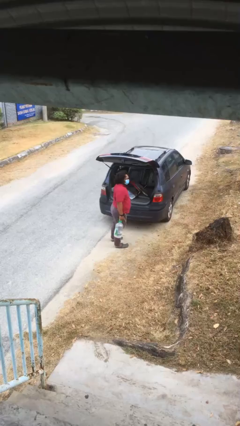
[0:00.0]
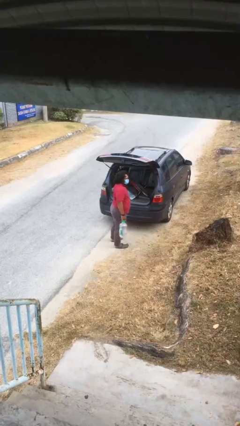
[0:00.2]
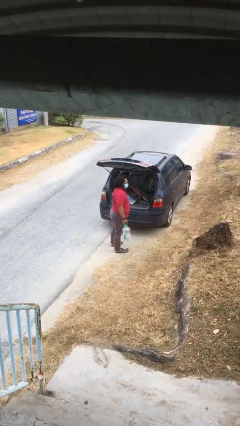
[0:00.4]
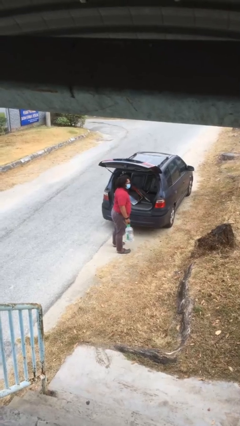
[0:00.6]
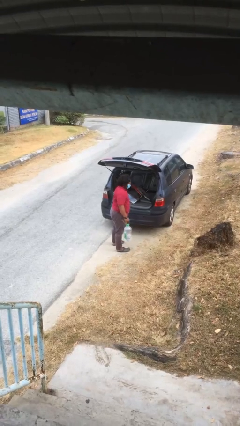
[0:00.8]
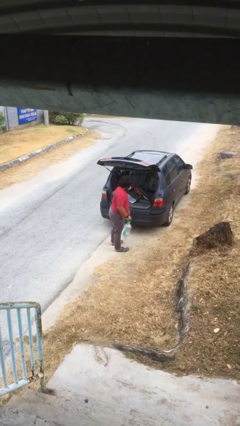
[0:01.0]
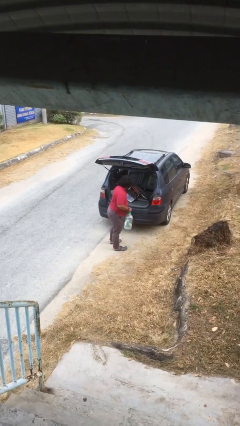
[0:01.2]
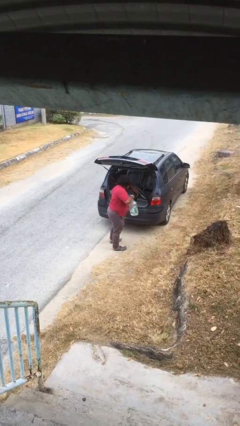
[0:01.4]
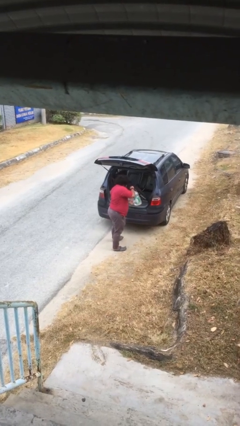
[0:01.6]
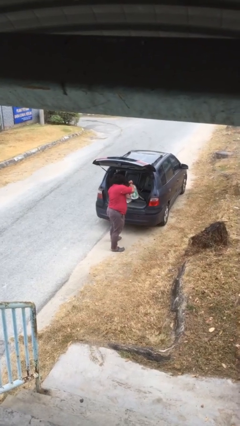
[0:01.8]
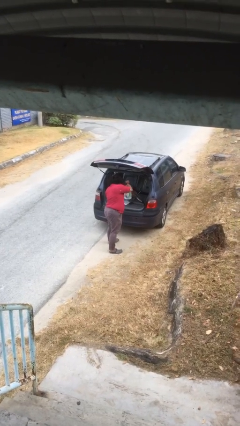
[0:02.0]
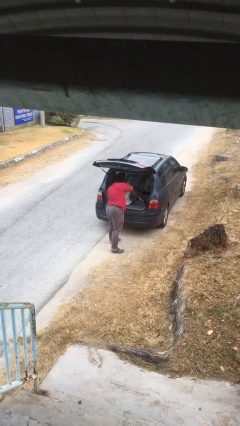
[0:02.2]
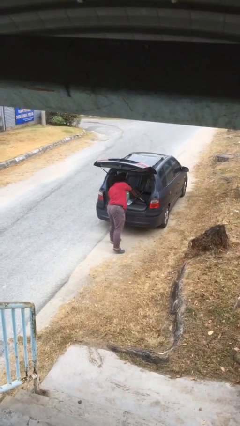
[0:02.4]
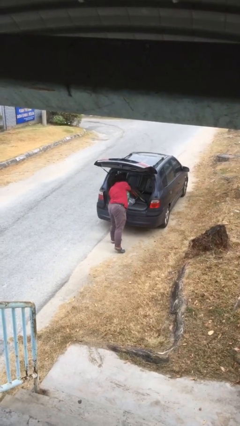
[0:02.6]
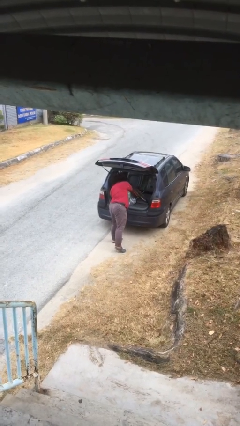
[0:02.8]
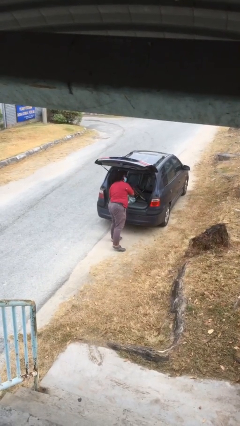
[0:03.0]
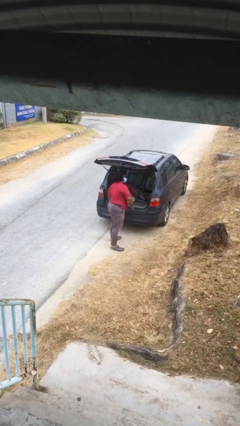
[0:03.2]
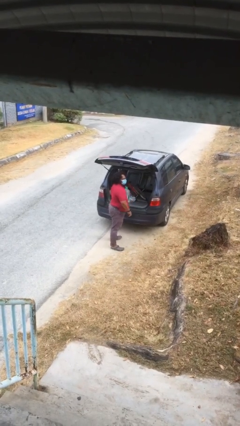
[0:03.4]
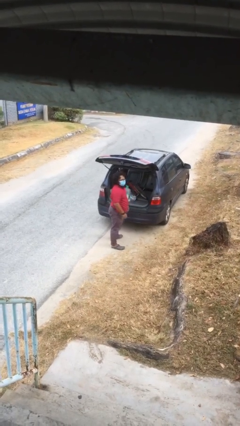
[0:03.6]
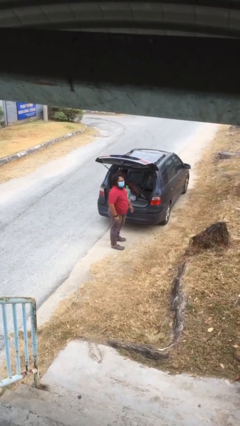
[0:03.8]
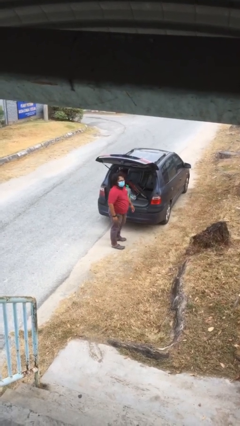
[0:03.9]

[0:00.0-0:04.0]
person loads car

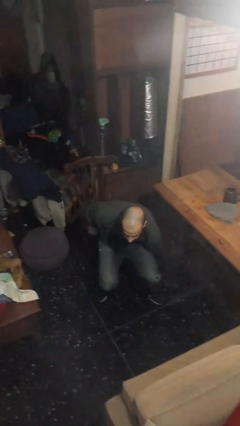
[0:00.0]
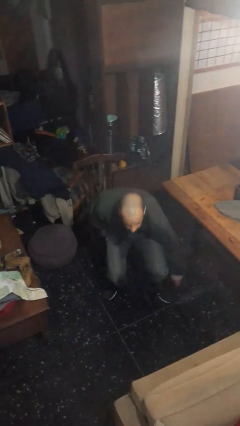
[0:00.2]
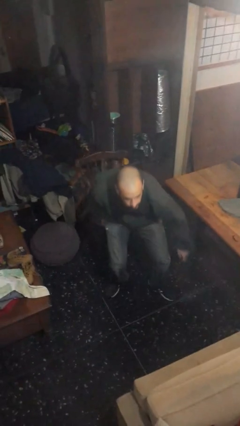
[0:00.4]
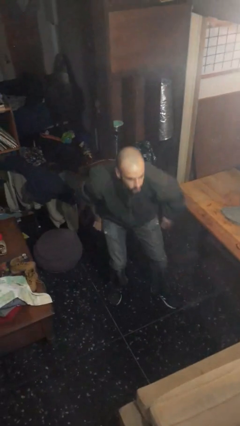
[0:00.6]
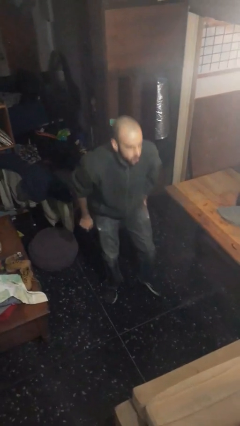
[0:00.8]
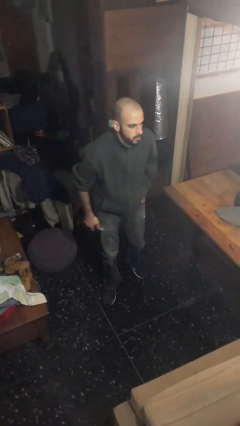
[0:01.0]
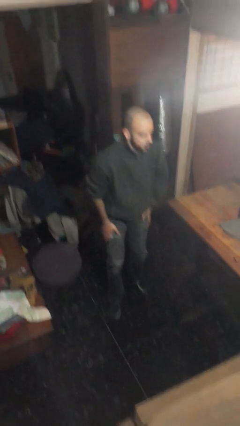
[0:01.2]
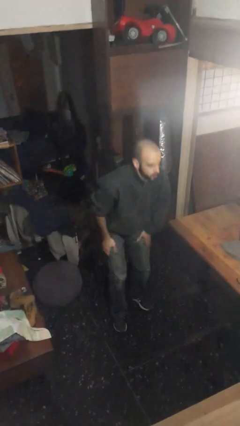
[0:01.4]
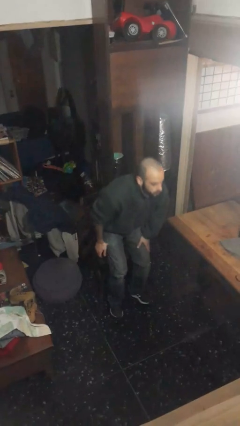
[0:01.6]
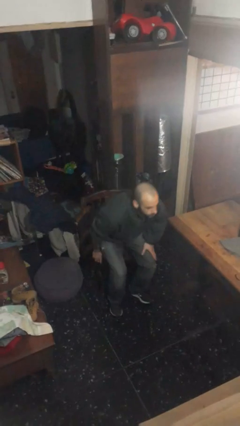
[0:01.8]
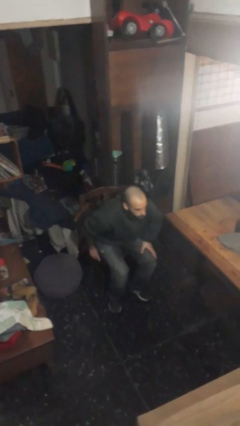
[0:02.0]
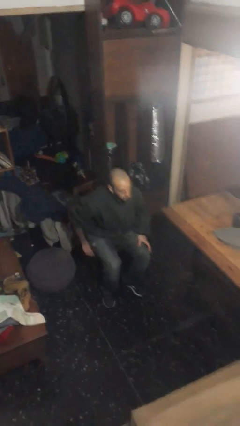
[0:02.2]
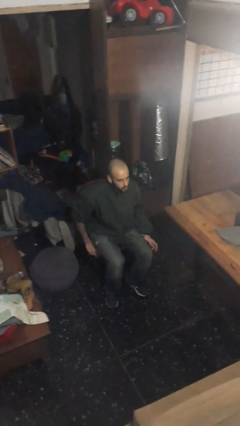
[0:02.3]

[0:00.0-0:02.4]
person stands up from floor

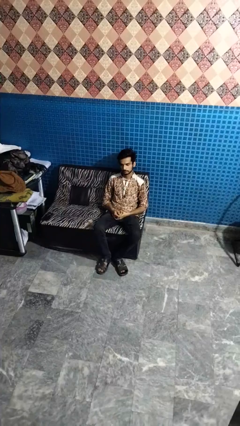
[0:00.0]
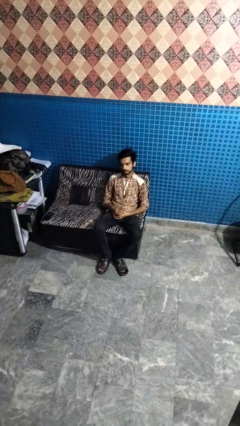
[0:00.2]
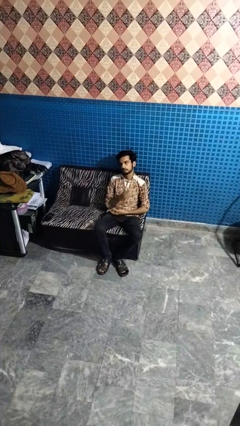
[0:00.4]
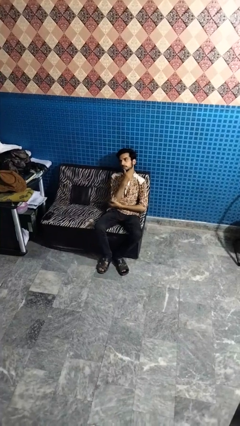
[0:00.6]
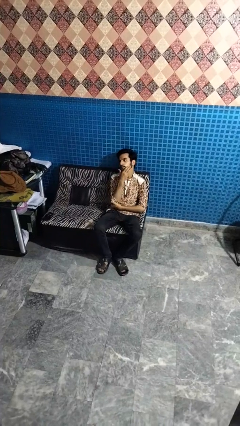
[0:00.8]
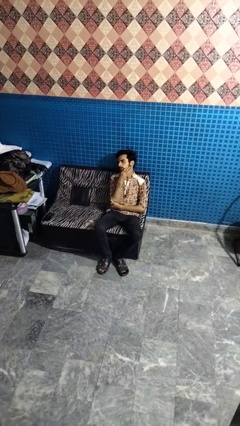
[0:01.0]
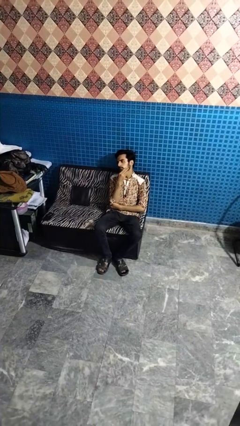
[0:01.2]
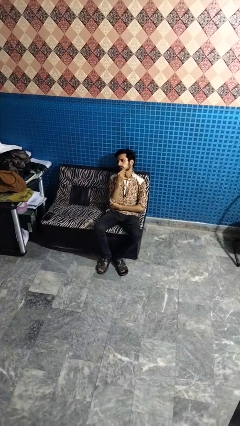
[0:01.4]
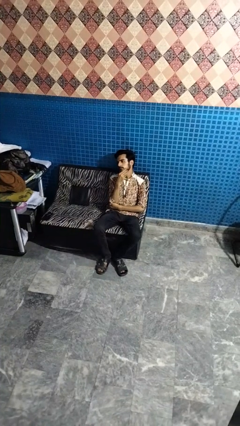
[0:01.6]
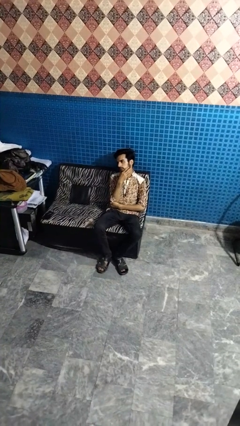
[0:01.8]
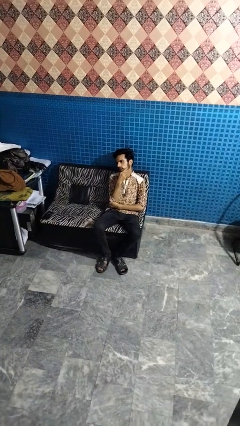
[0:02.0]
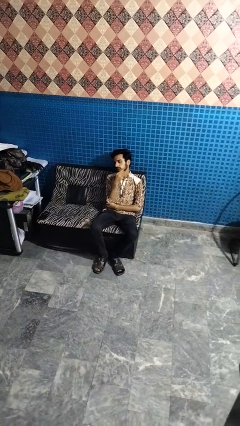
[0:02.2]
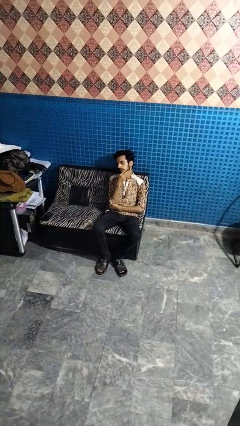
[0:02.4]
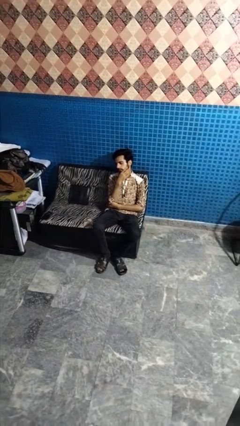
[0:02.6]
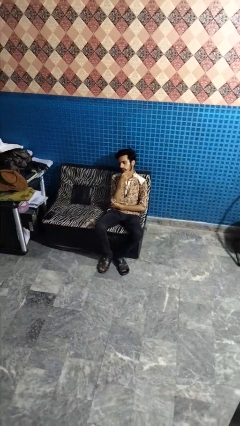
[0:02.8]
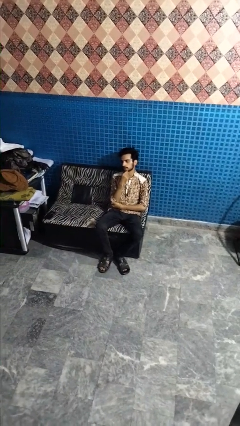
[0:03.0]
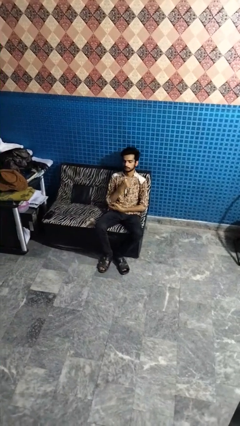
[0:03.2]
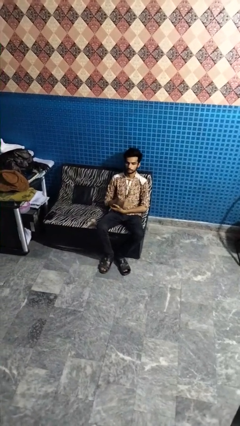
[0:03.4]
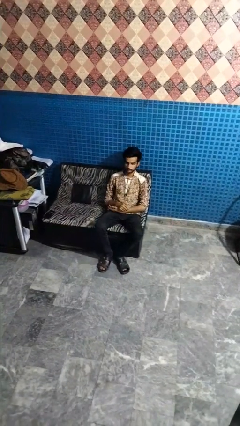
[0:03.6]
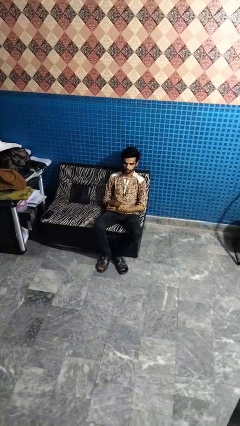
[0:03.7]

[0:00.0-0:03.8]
person strokes chin

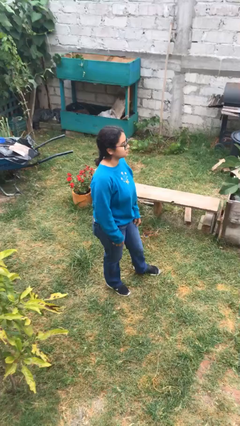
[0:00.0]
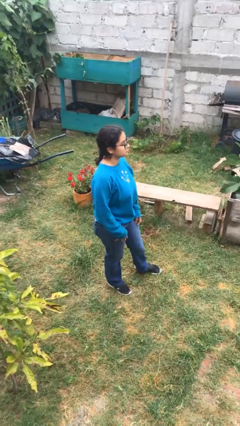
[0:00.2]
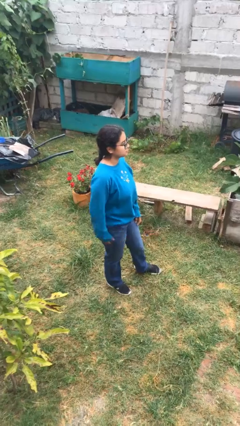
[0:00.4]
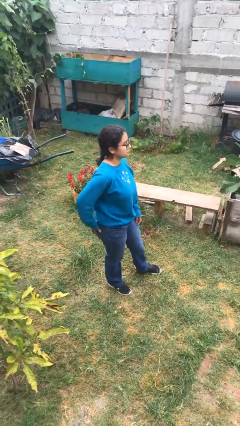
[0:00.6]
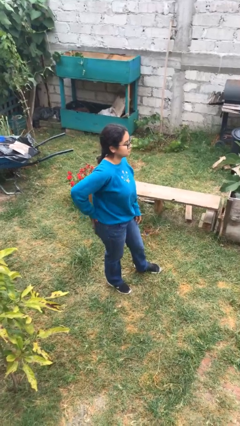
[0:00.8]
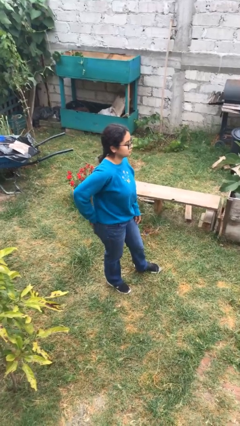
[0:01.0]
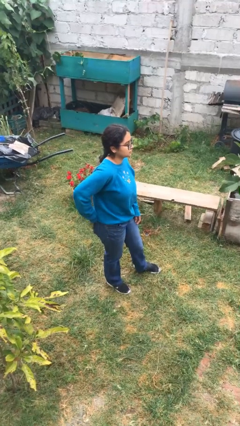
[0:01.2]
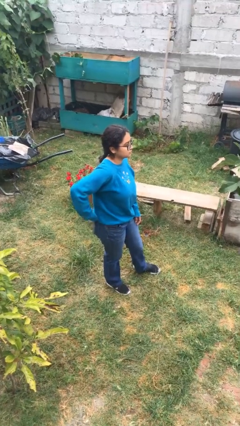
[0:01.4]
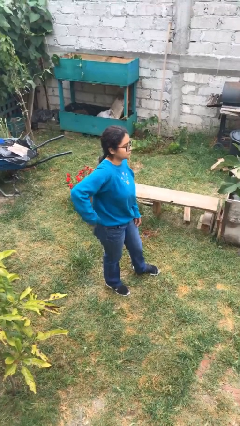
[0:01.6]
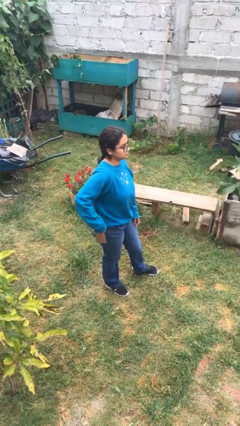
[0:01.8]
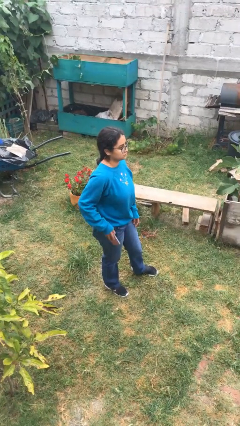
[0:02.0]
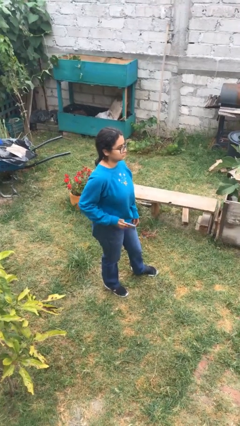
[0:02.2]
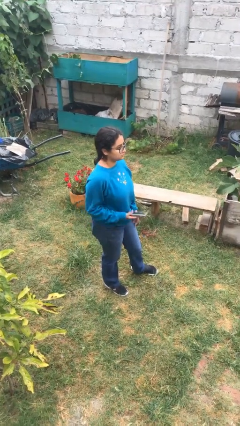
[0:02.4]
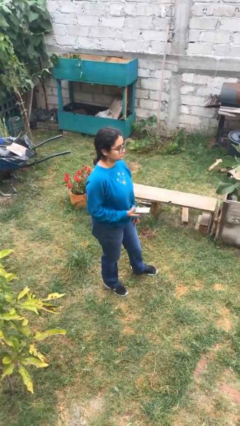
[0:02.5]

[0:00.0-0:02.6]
person takes phone from pocket

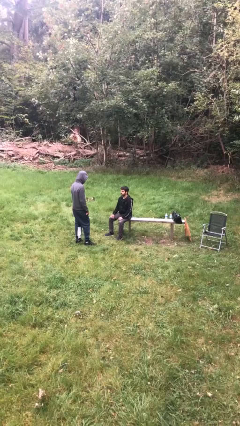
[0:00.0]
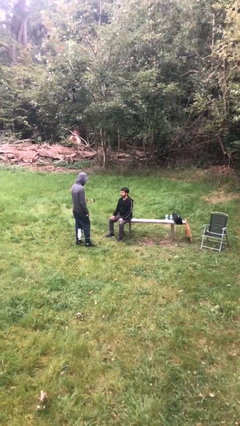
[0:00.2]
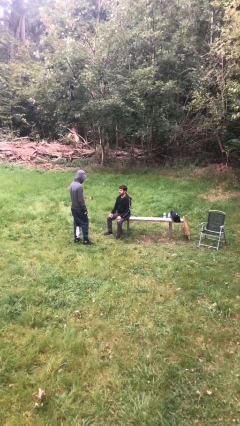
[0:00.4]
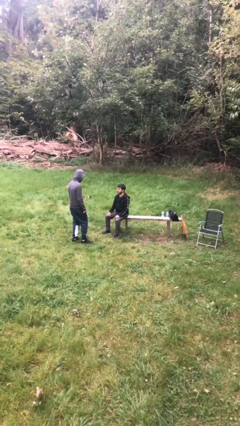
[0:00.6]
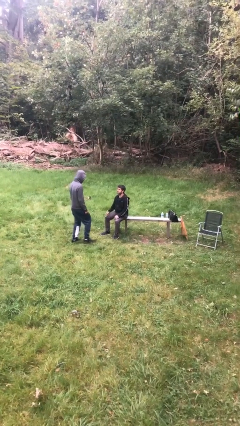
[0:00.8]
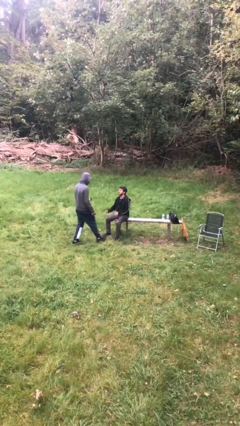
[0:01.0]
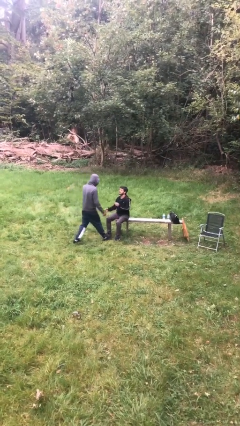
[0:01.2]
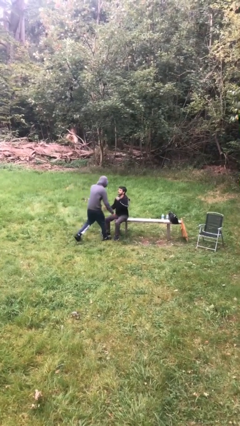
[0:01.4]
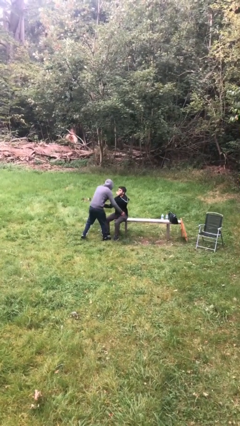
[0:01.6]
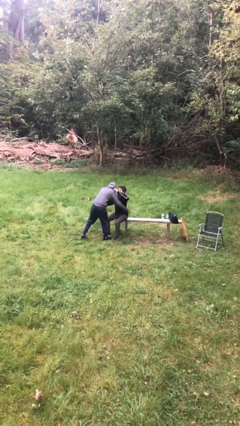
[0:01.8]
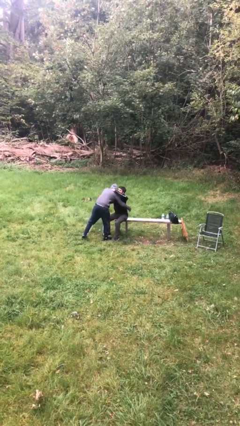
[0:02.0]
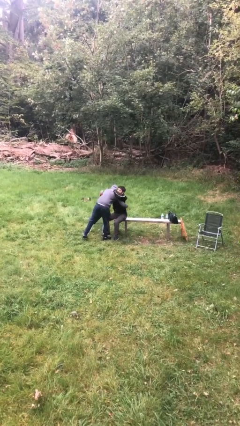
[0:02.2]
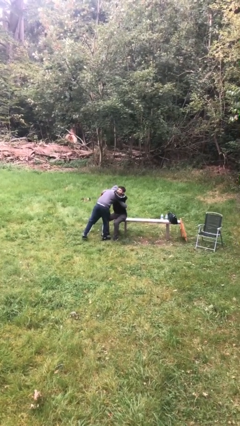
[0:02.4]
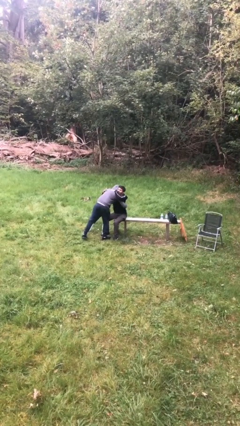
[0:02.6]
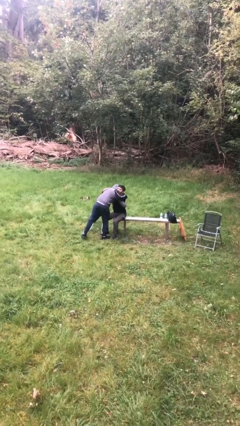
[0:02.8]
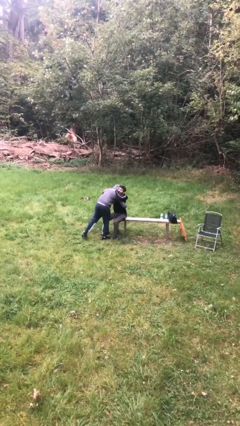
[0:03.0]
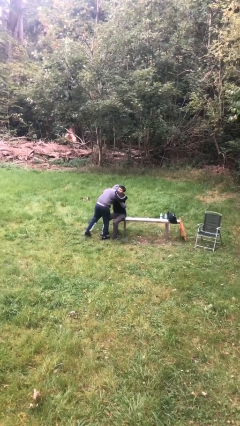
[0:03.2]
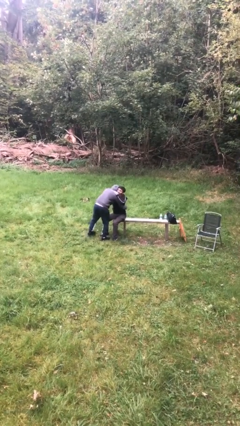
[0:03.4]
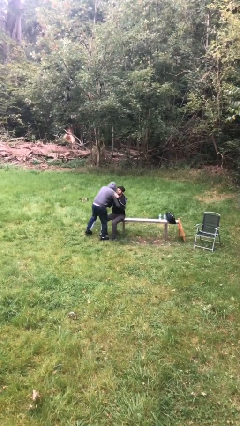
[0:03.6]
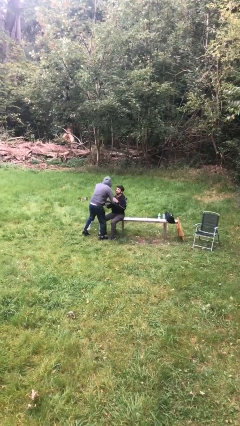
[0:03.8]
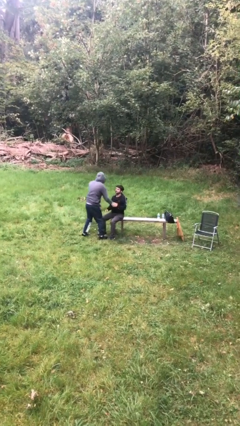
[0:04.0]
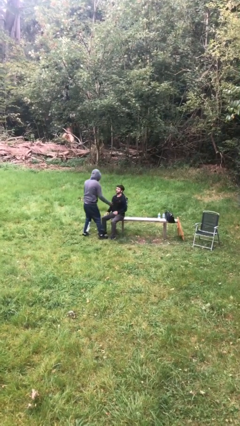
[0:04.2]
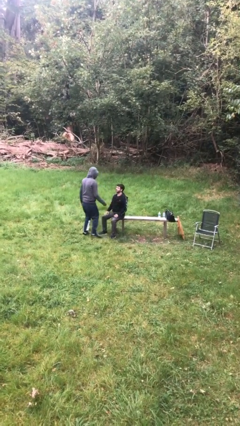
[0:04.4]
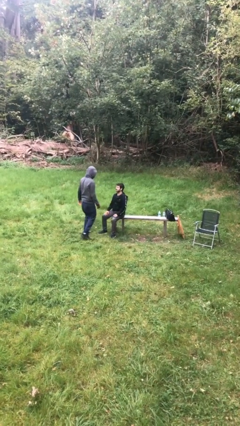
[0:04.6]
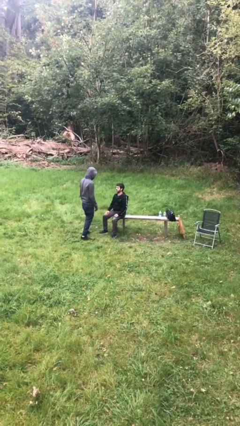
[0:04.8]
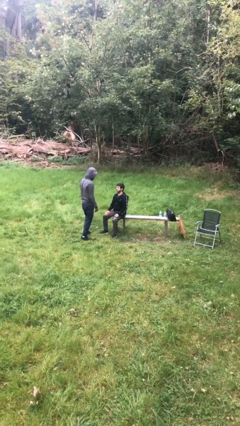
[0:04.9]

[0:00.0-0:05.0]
person embraces person
